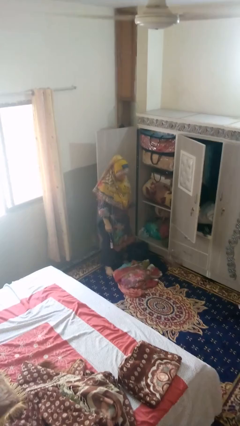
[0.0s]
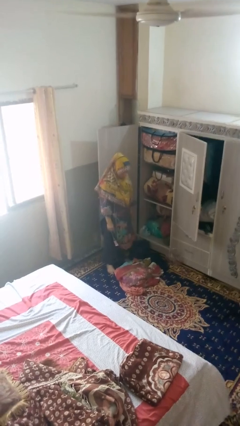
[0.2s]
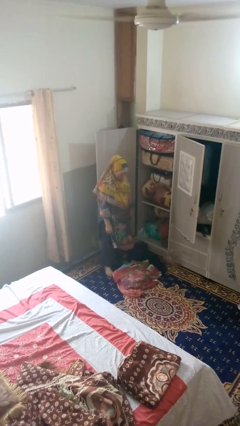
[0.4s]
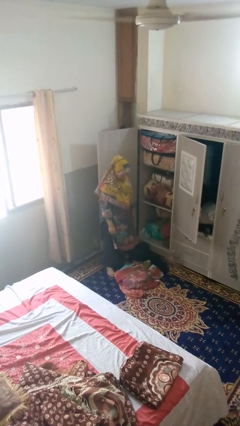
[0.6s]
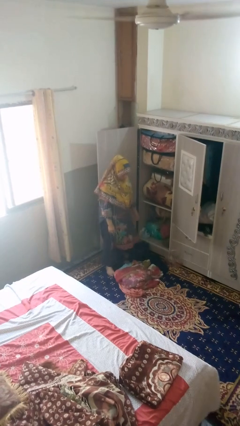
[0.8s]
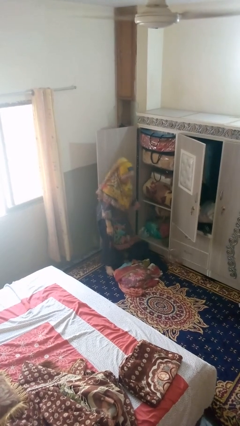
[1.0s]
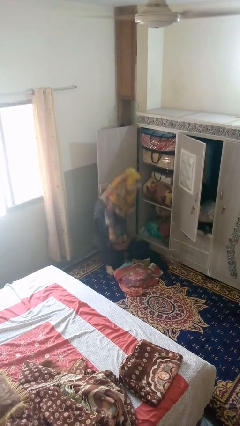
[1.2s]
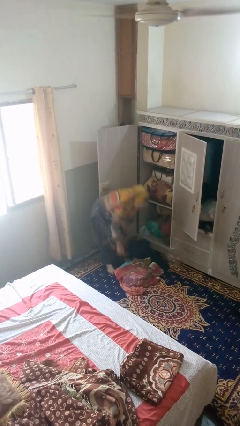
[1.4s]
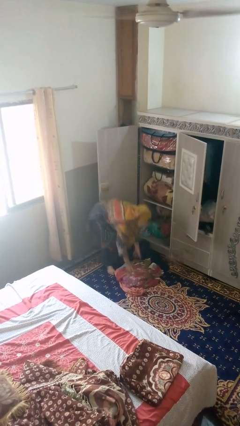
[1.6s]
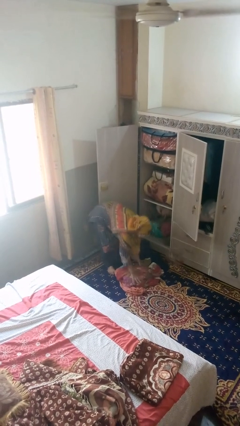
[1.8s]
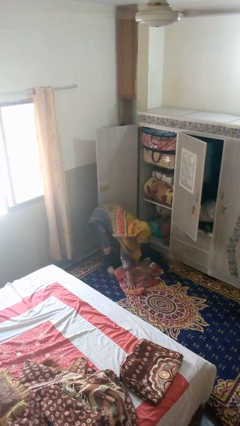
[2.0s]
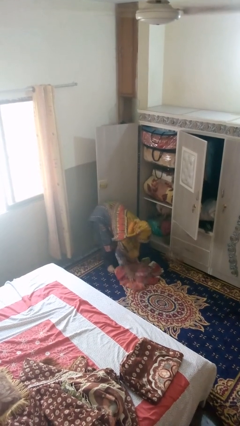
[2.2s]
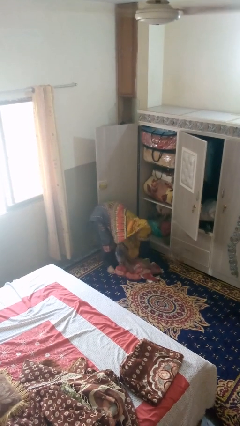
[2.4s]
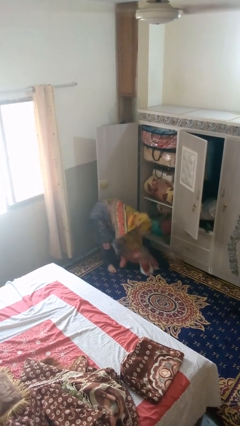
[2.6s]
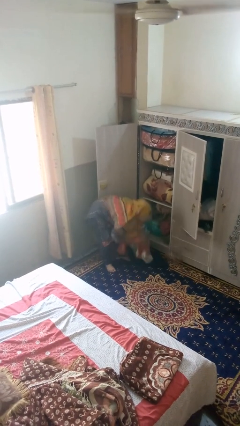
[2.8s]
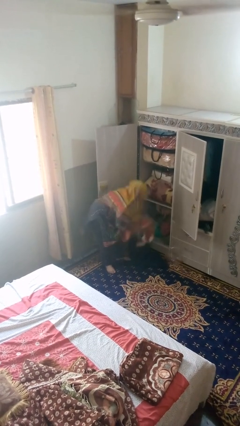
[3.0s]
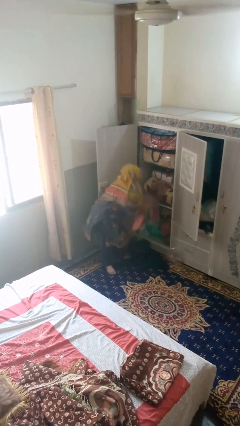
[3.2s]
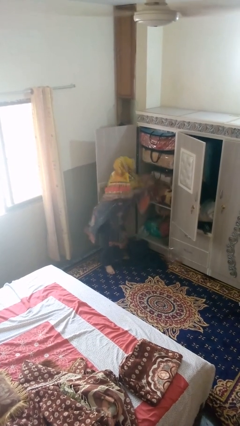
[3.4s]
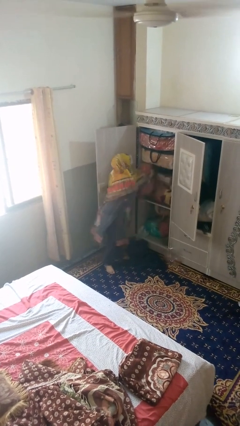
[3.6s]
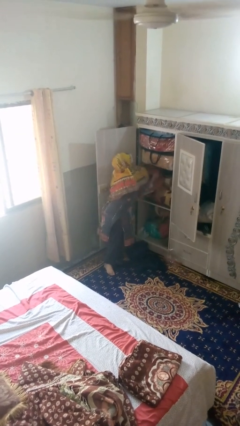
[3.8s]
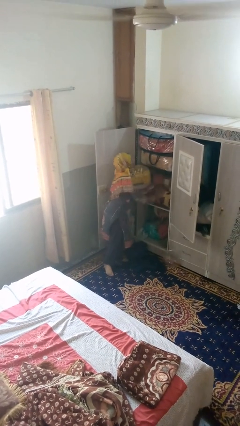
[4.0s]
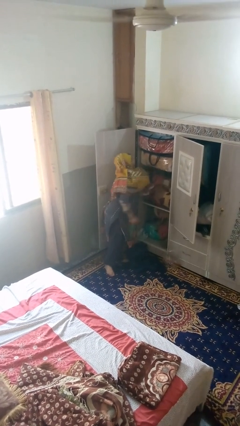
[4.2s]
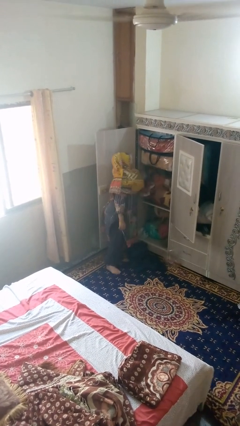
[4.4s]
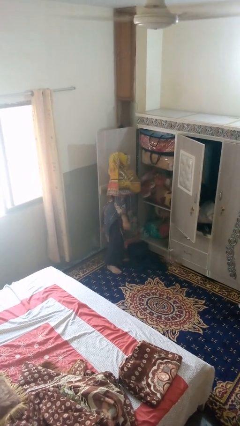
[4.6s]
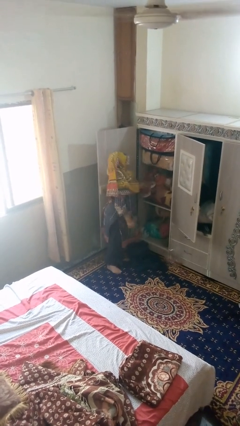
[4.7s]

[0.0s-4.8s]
person takes clothes from dresser

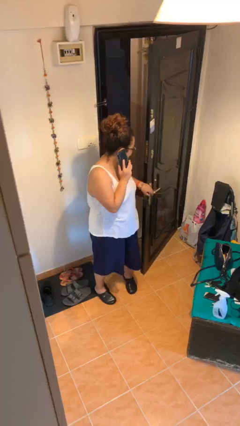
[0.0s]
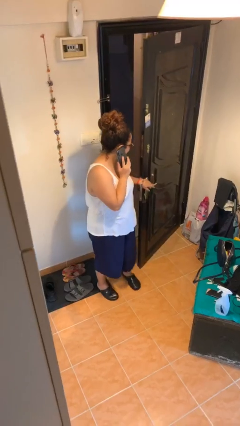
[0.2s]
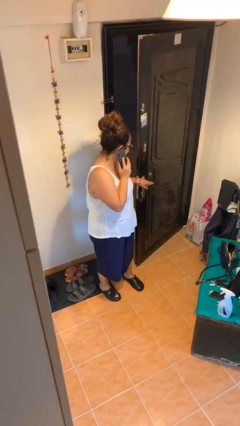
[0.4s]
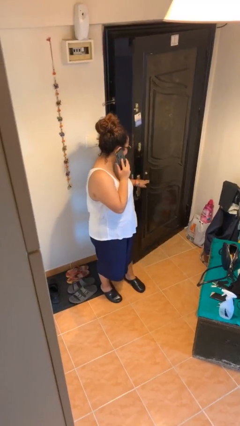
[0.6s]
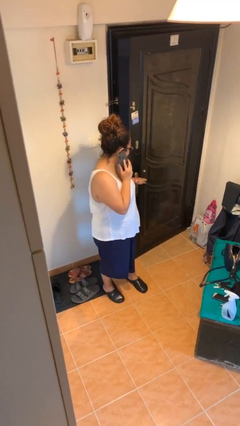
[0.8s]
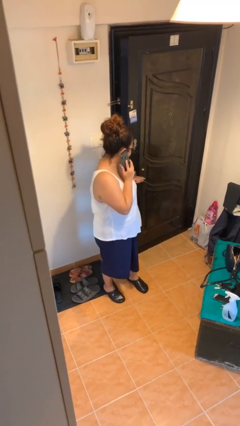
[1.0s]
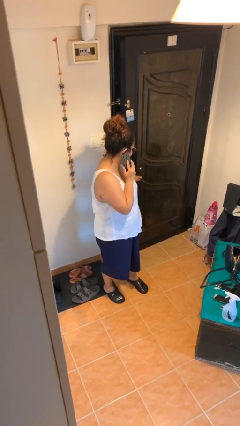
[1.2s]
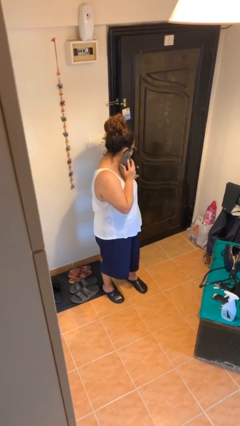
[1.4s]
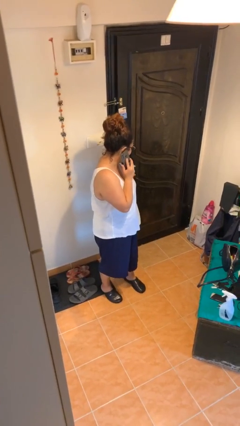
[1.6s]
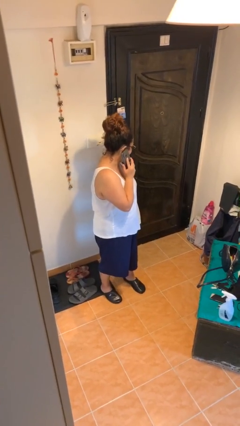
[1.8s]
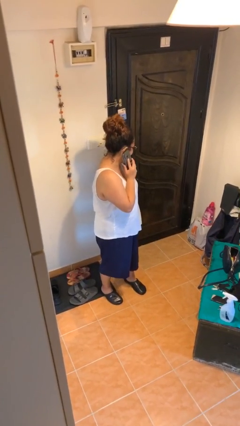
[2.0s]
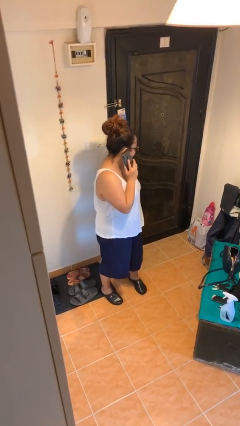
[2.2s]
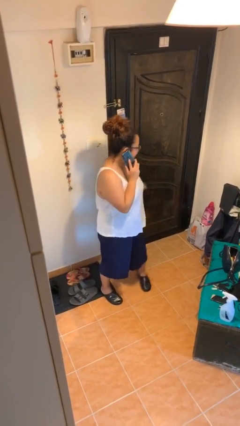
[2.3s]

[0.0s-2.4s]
person closes facility door

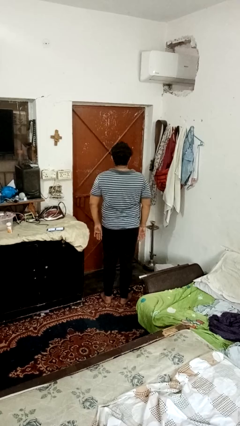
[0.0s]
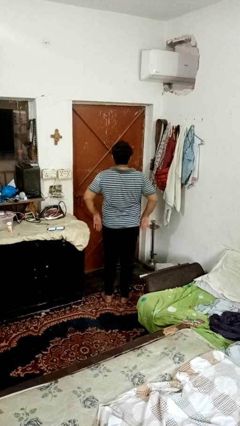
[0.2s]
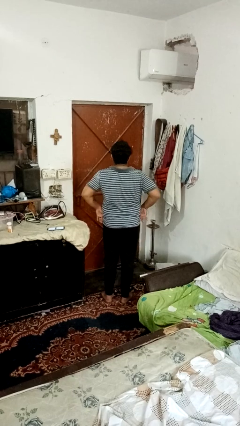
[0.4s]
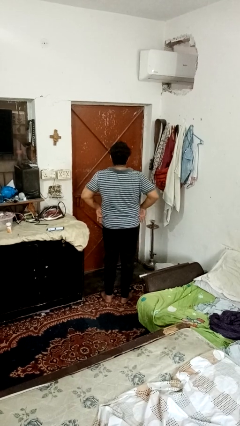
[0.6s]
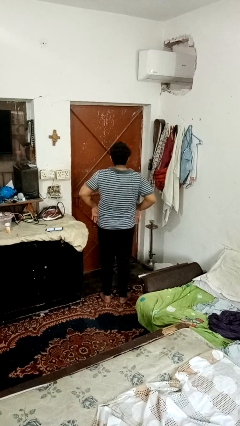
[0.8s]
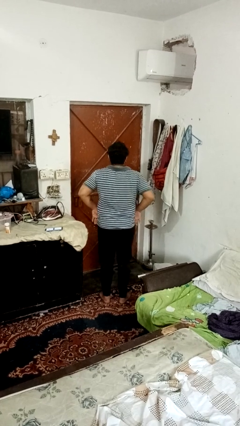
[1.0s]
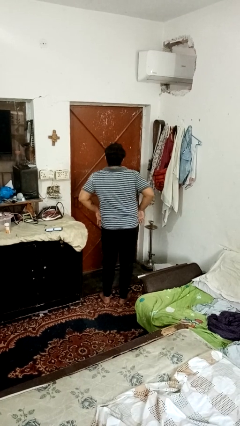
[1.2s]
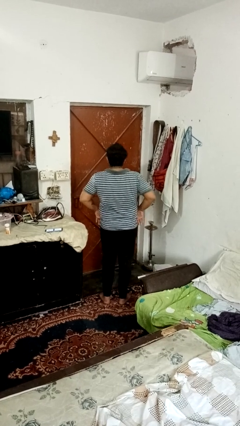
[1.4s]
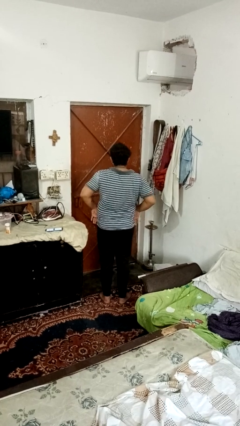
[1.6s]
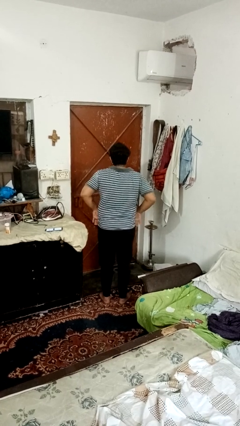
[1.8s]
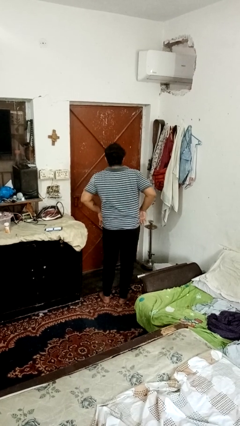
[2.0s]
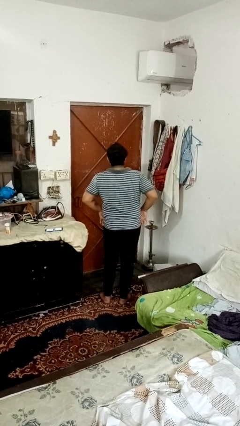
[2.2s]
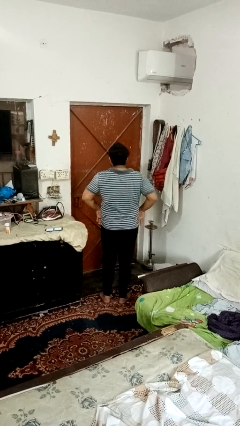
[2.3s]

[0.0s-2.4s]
person wiggles hips

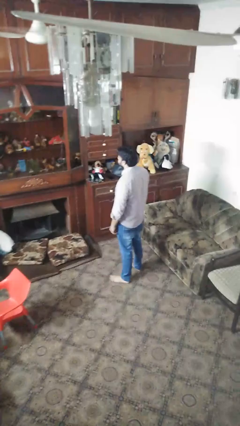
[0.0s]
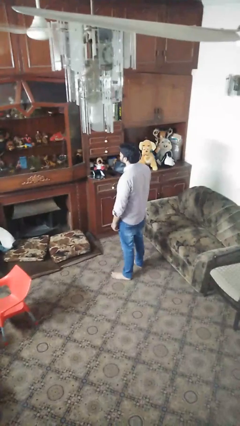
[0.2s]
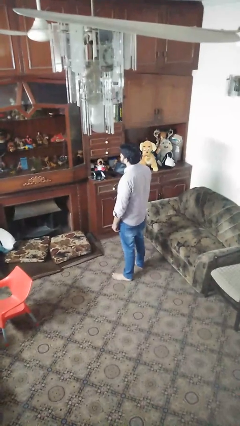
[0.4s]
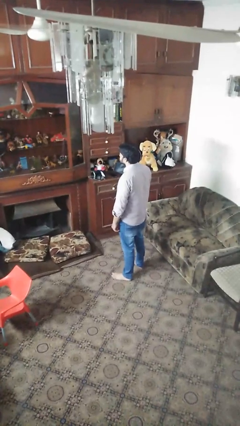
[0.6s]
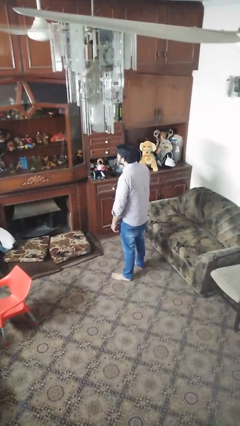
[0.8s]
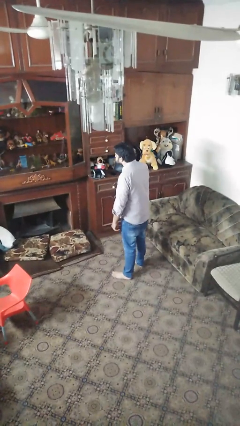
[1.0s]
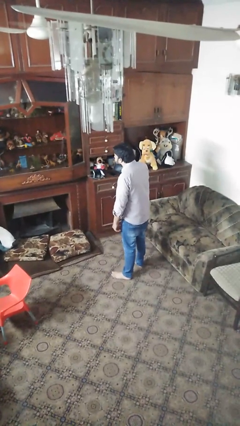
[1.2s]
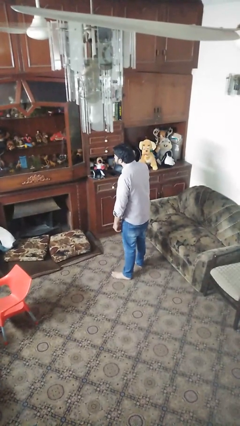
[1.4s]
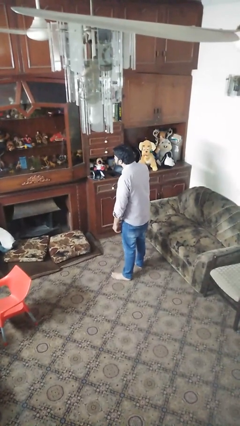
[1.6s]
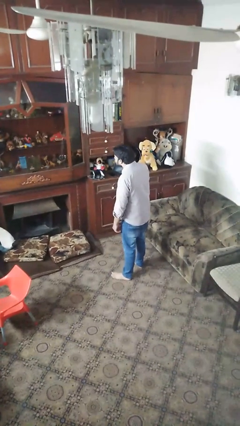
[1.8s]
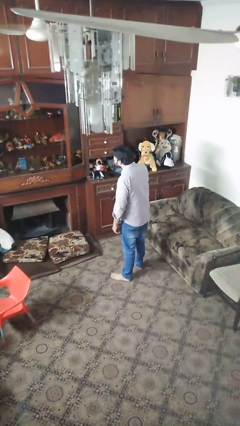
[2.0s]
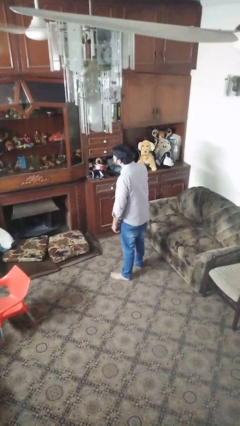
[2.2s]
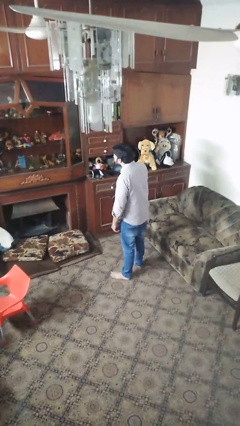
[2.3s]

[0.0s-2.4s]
person gestures listen closely

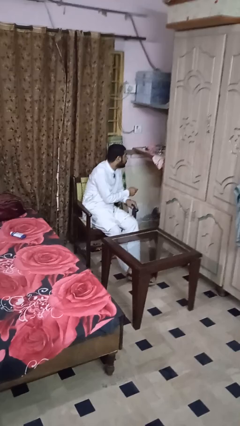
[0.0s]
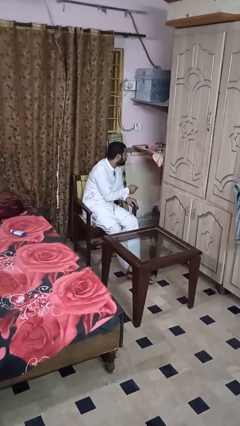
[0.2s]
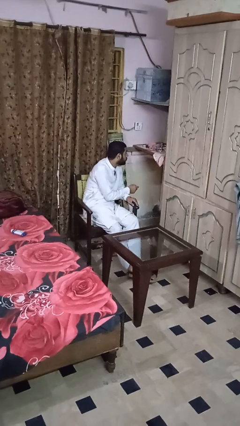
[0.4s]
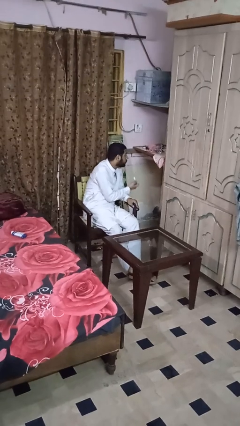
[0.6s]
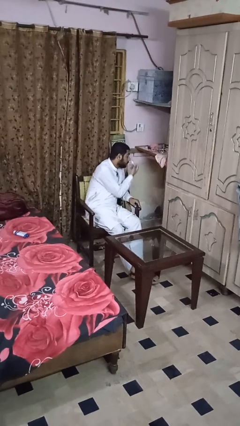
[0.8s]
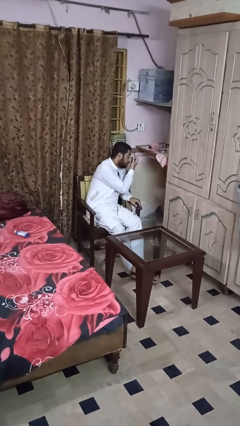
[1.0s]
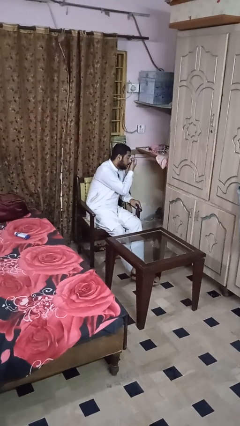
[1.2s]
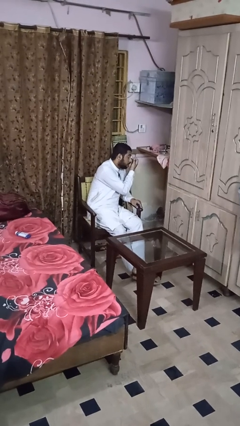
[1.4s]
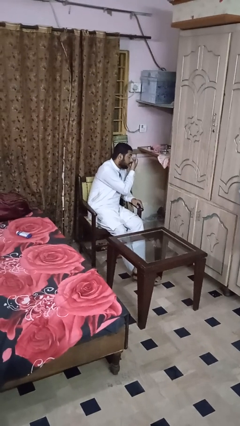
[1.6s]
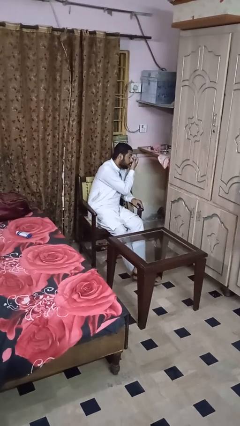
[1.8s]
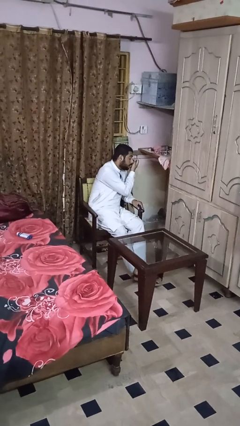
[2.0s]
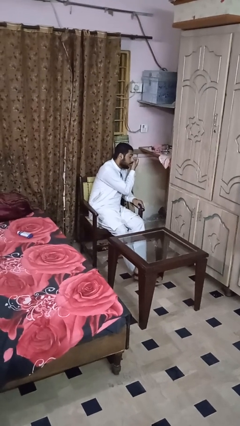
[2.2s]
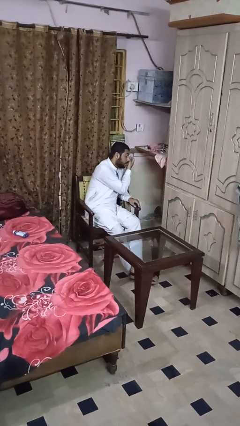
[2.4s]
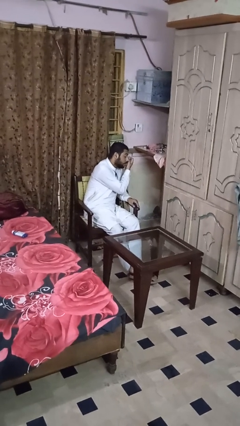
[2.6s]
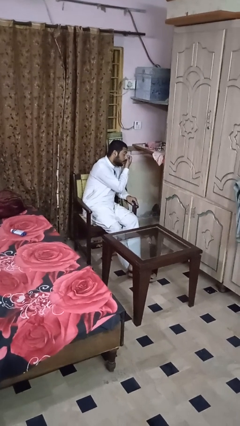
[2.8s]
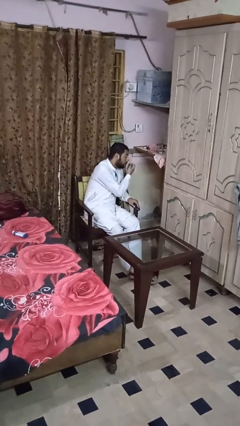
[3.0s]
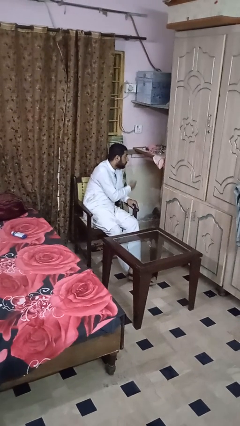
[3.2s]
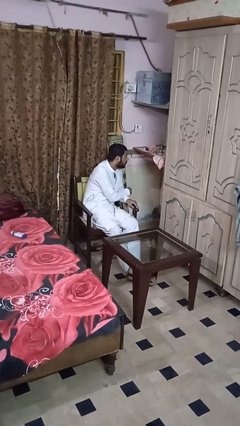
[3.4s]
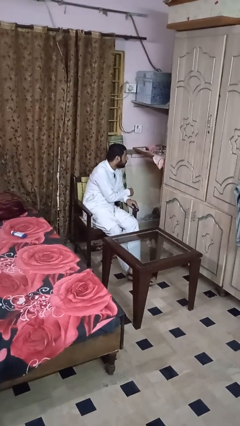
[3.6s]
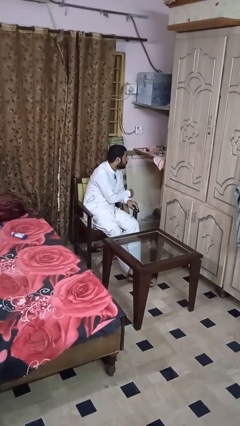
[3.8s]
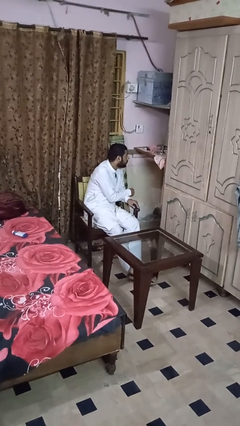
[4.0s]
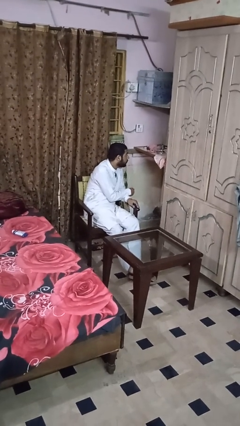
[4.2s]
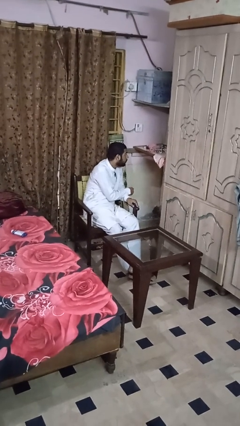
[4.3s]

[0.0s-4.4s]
person applies eye makeup

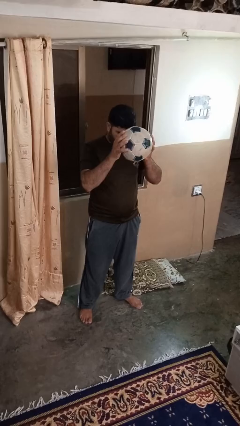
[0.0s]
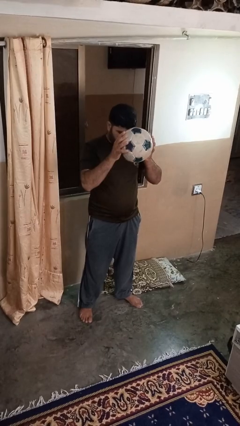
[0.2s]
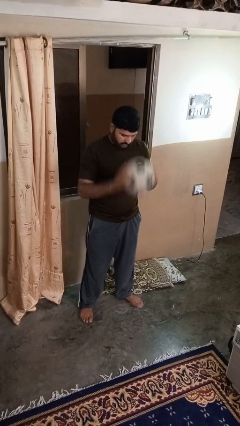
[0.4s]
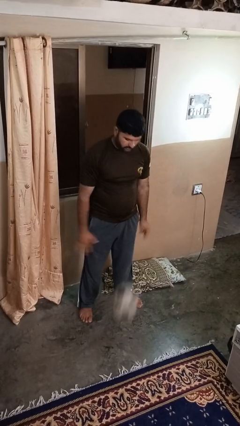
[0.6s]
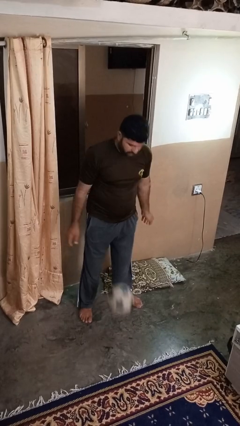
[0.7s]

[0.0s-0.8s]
person bounces ball on floor

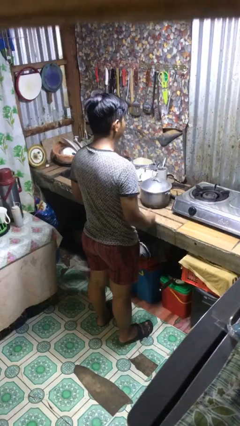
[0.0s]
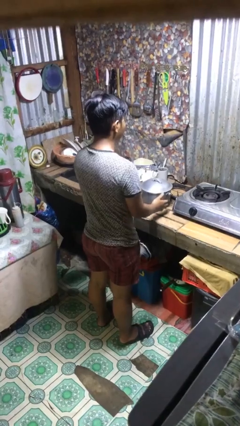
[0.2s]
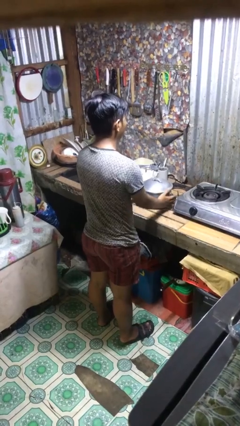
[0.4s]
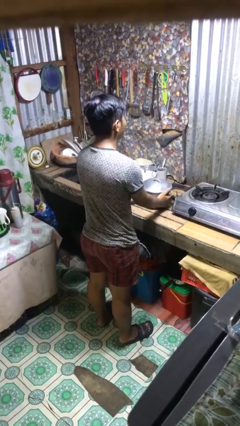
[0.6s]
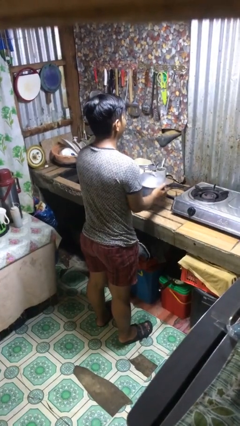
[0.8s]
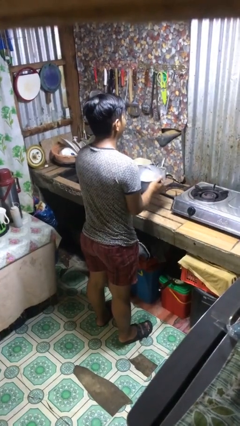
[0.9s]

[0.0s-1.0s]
person picks up object from countertop
